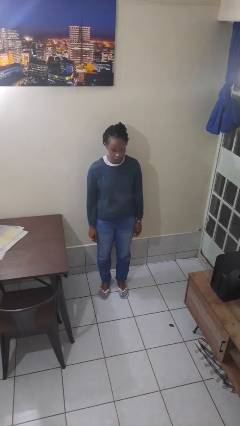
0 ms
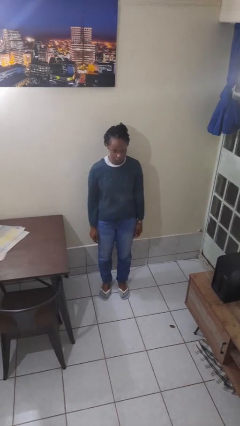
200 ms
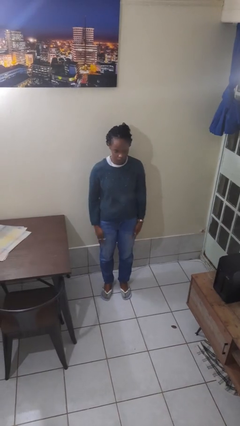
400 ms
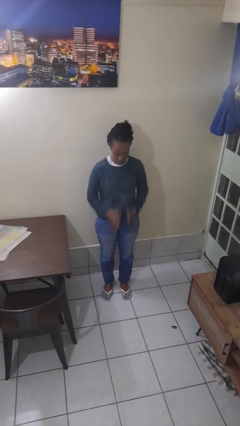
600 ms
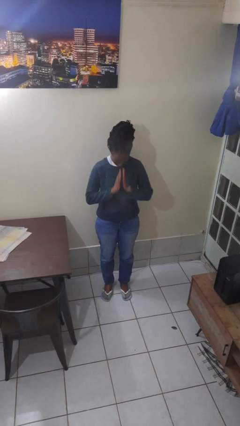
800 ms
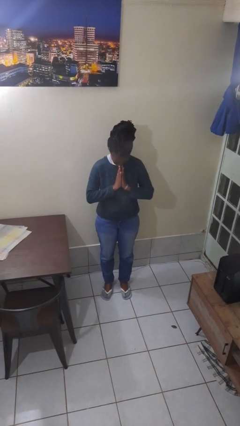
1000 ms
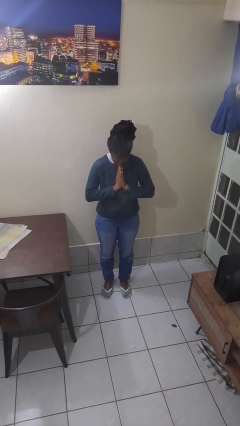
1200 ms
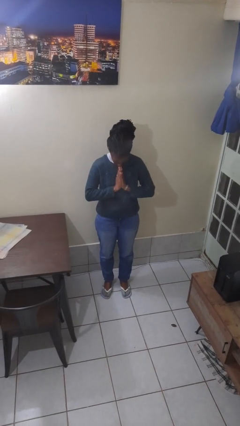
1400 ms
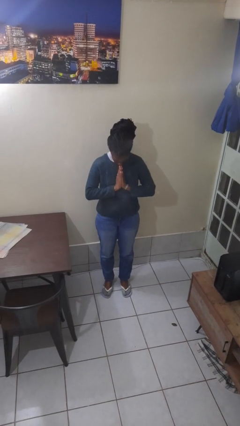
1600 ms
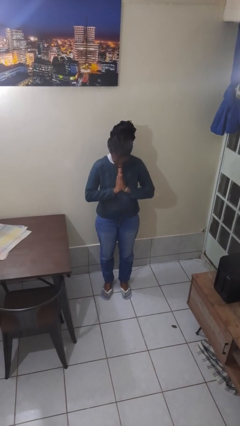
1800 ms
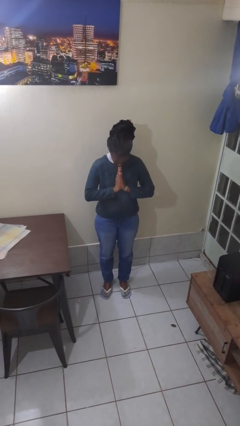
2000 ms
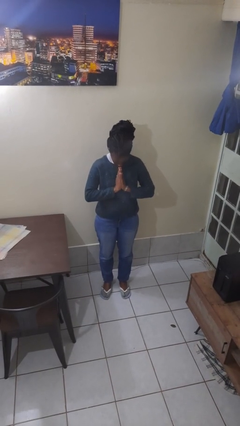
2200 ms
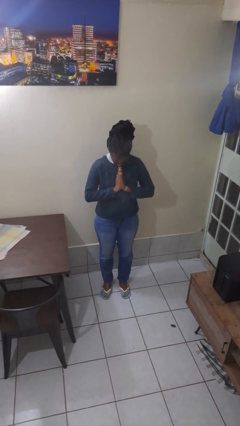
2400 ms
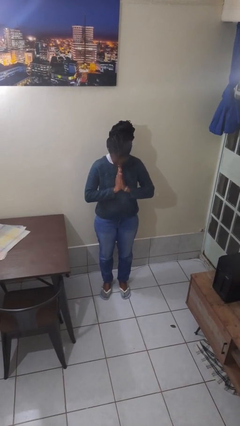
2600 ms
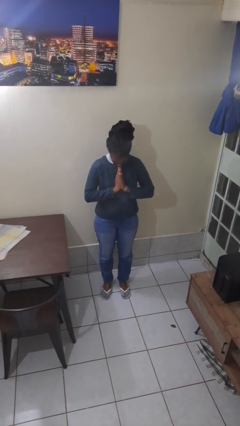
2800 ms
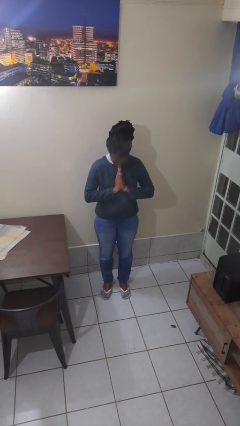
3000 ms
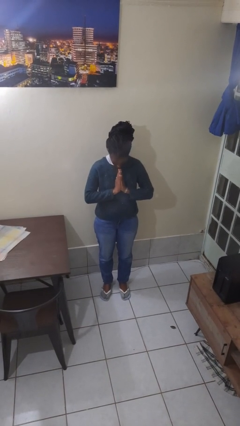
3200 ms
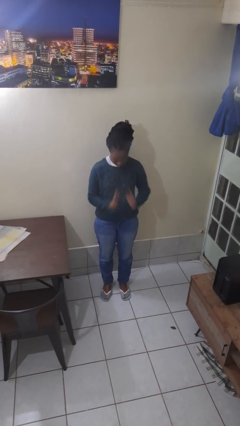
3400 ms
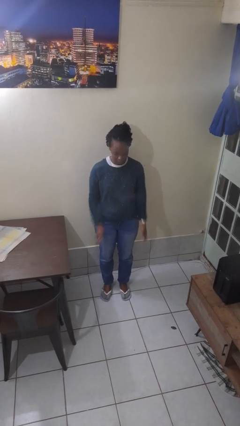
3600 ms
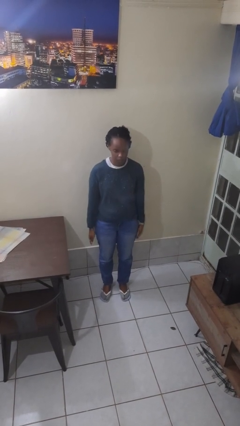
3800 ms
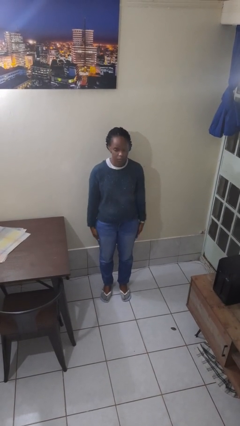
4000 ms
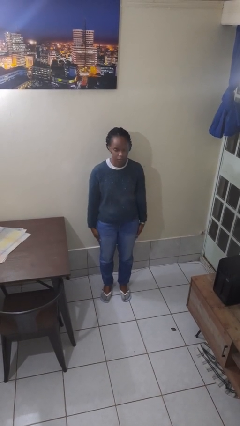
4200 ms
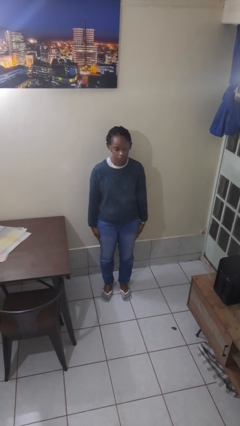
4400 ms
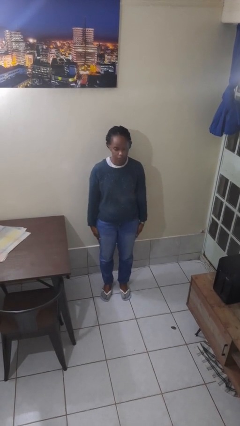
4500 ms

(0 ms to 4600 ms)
person prays

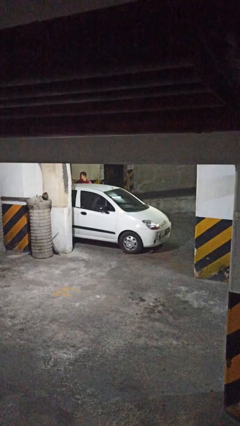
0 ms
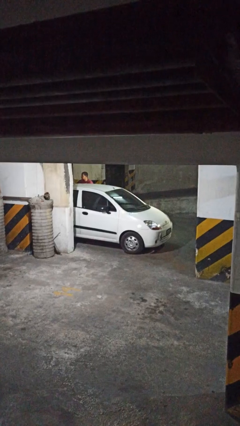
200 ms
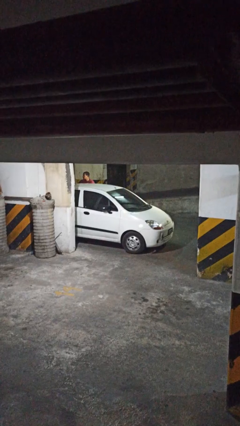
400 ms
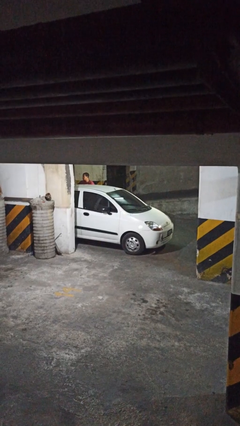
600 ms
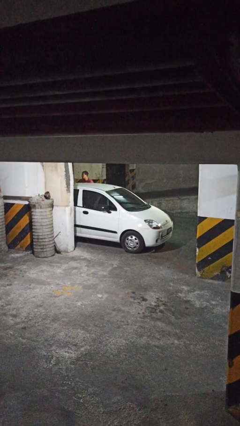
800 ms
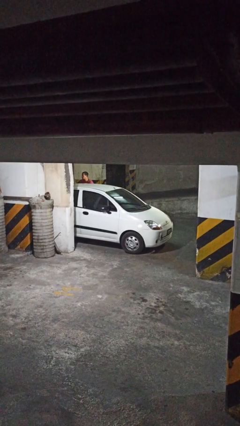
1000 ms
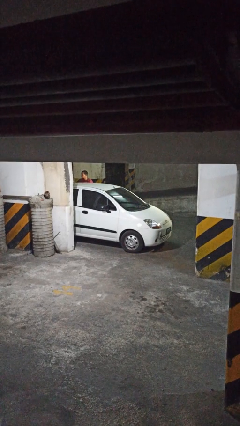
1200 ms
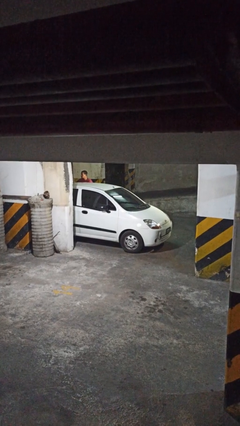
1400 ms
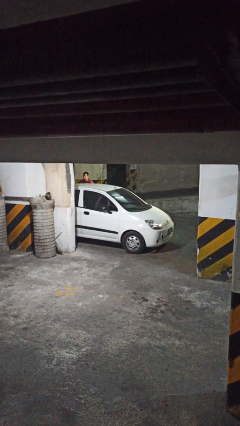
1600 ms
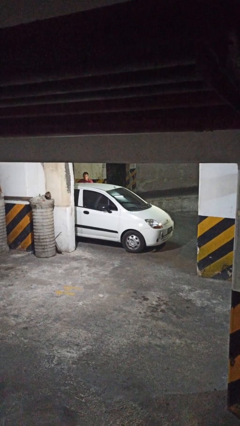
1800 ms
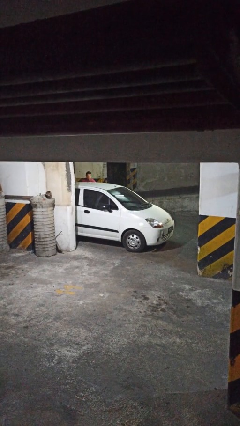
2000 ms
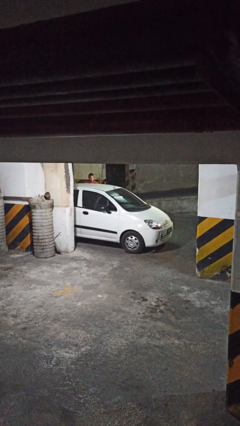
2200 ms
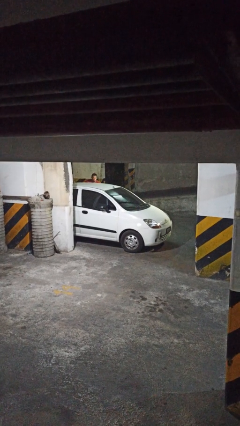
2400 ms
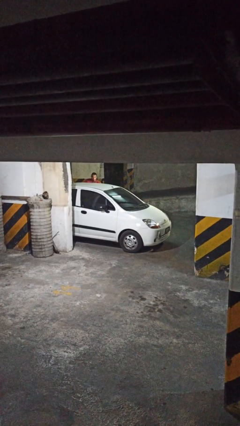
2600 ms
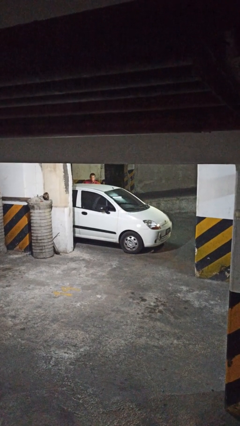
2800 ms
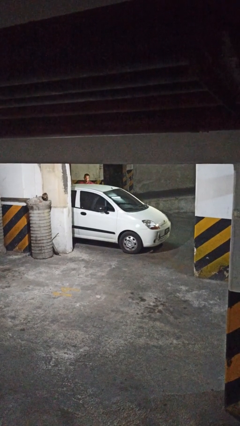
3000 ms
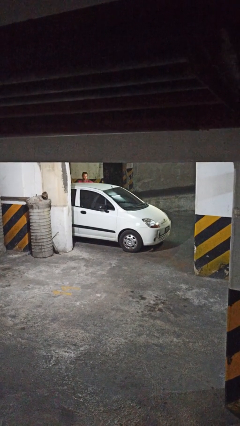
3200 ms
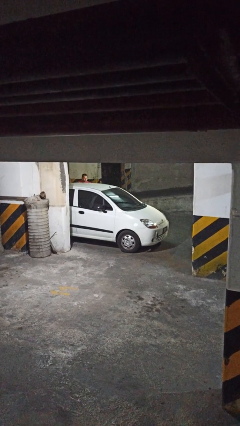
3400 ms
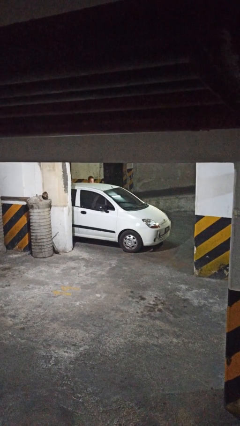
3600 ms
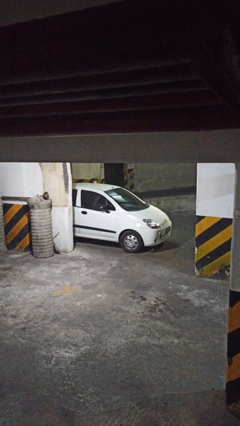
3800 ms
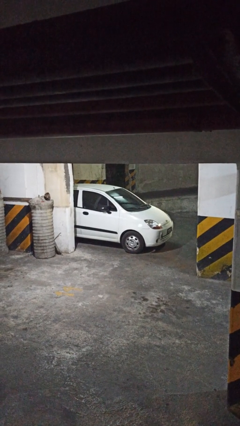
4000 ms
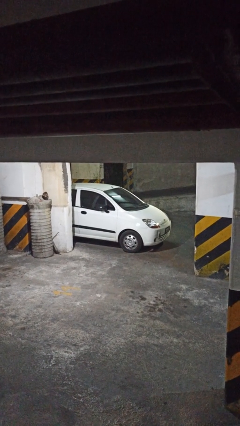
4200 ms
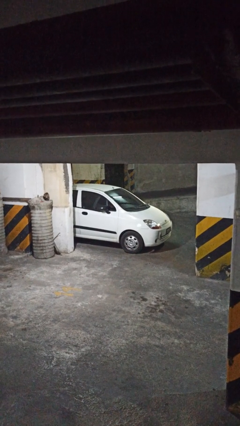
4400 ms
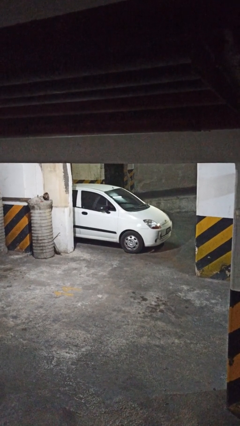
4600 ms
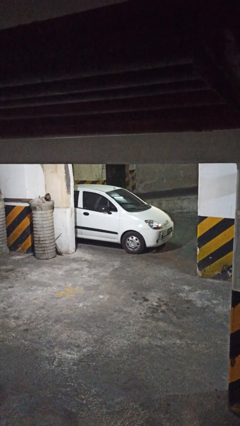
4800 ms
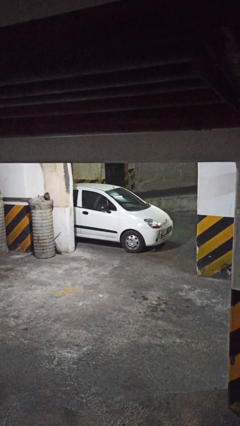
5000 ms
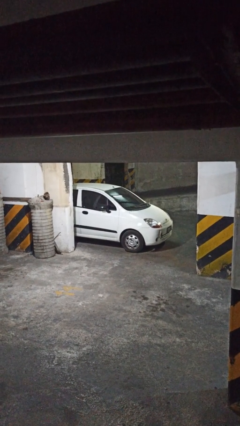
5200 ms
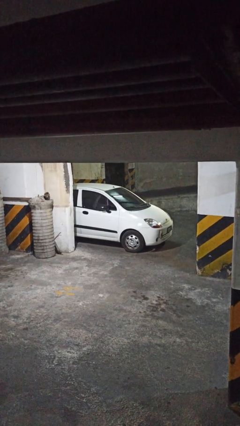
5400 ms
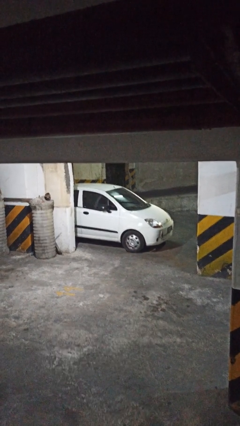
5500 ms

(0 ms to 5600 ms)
car picks up person

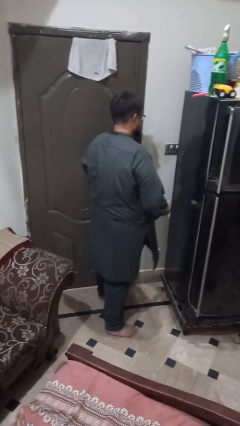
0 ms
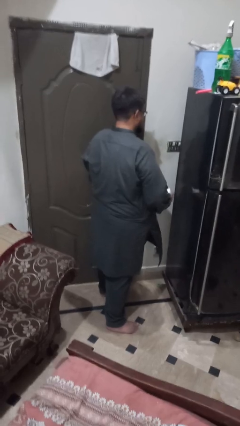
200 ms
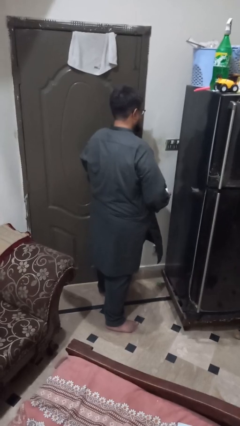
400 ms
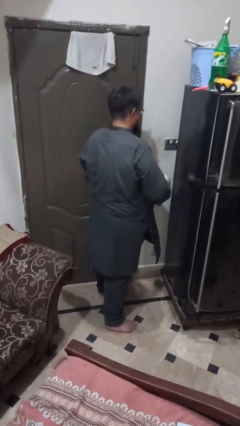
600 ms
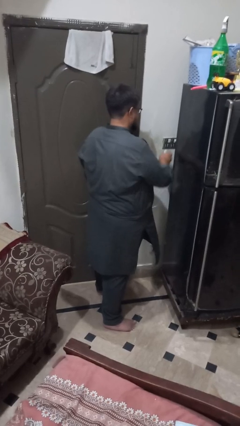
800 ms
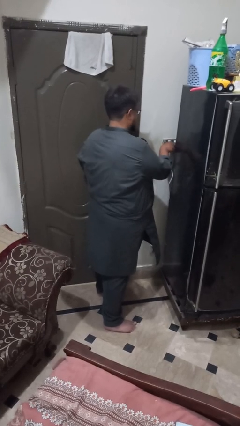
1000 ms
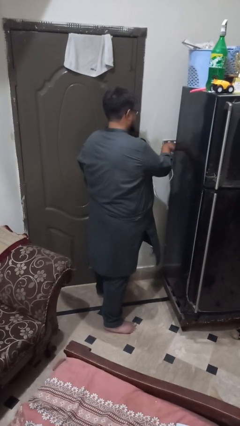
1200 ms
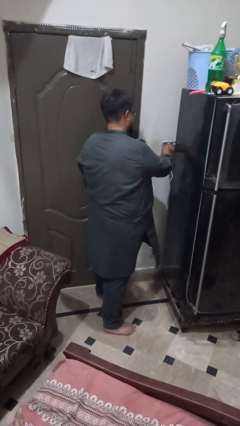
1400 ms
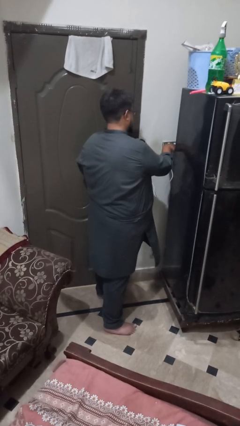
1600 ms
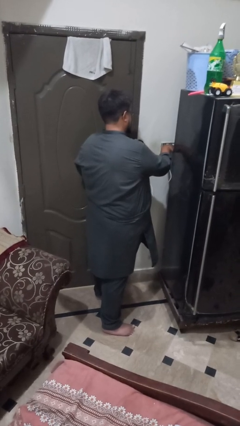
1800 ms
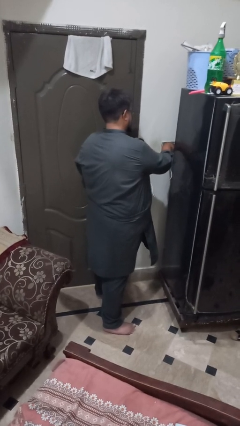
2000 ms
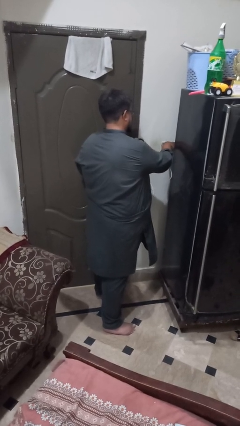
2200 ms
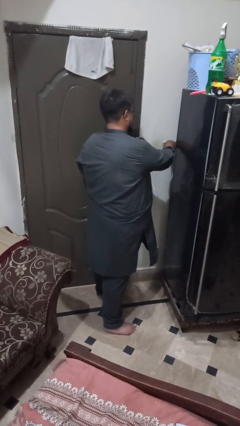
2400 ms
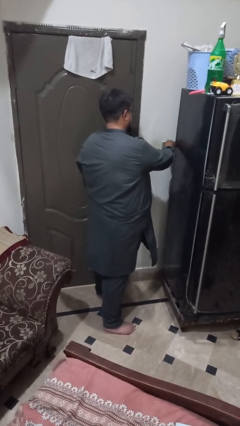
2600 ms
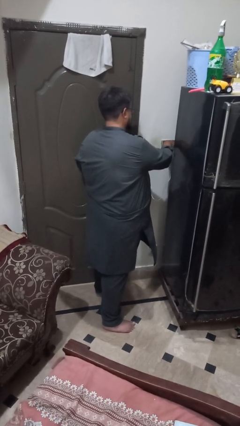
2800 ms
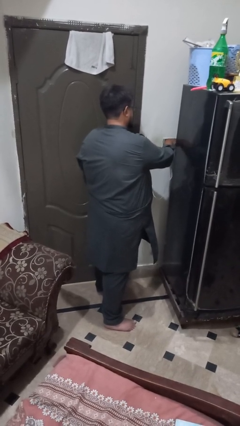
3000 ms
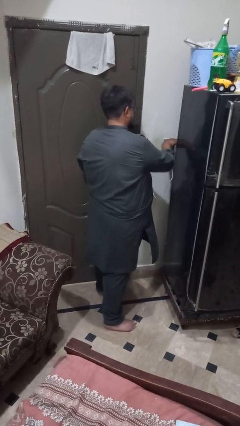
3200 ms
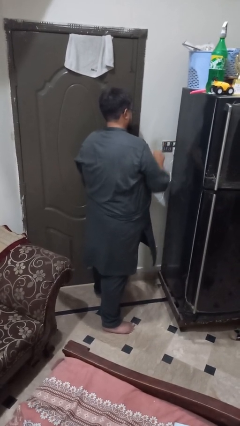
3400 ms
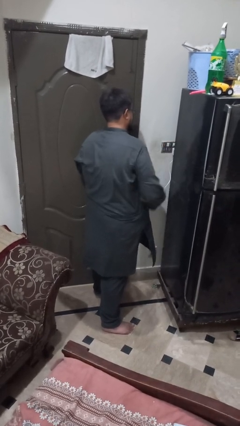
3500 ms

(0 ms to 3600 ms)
person plugs into electrical socket

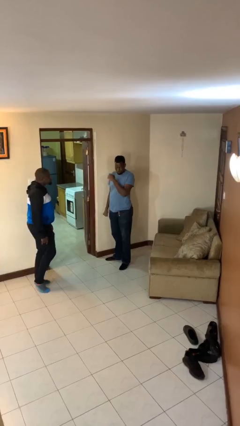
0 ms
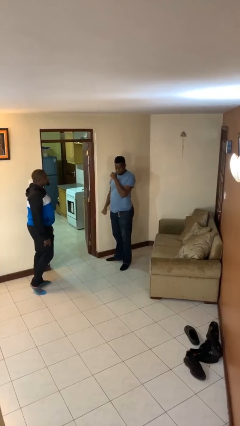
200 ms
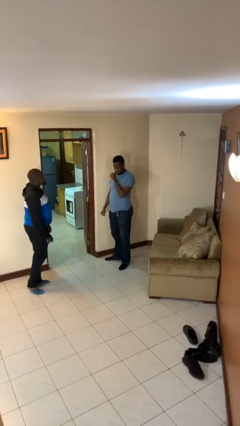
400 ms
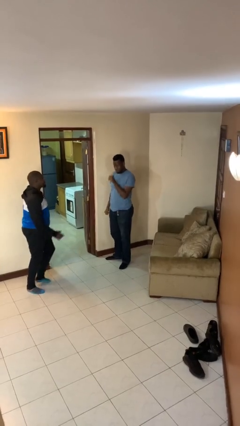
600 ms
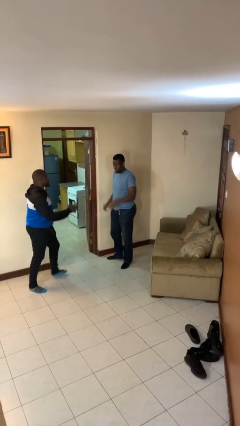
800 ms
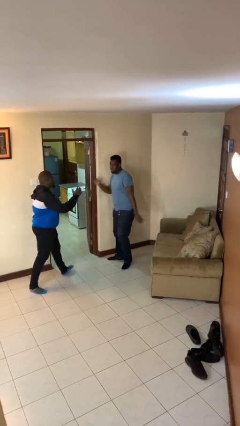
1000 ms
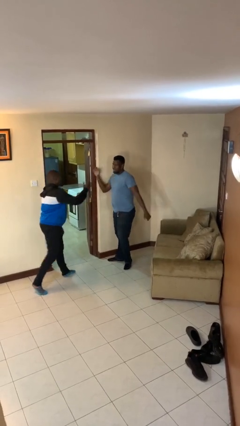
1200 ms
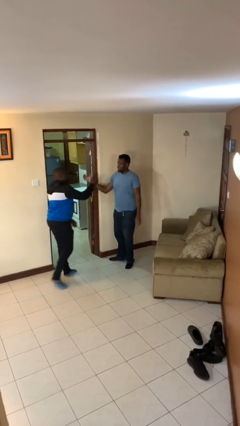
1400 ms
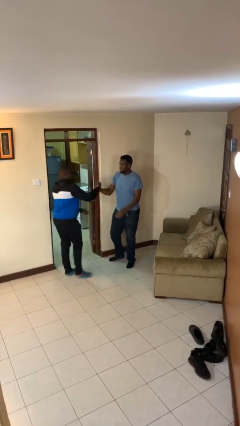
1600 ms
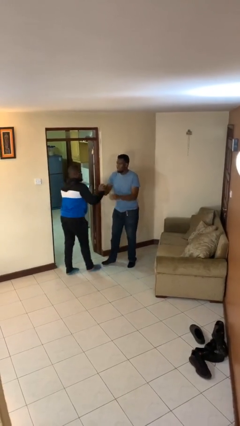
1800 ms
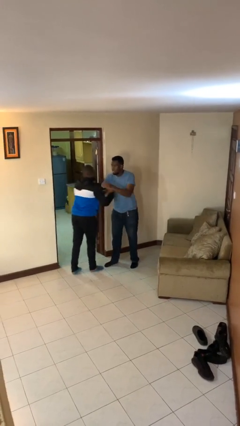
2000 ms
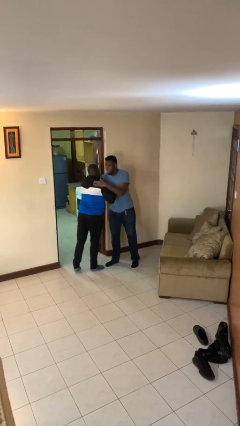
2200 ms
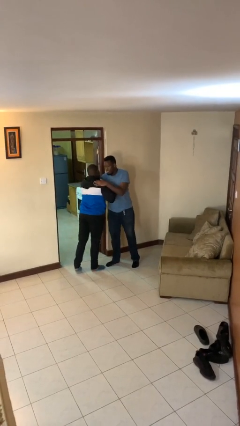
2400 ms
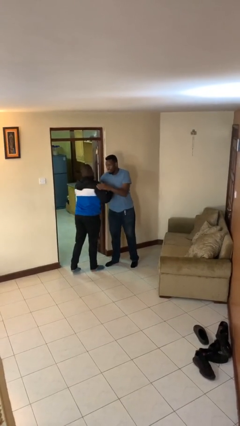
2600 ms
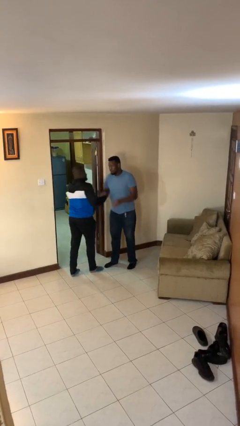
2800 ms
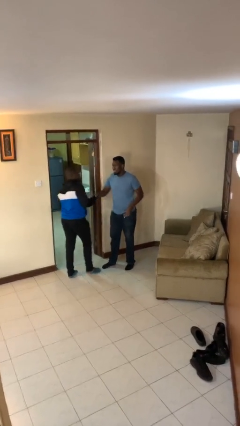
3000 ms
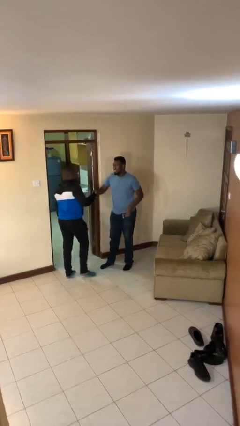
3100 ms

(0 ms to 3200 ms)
person embraces person

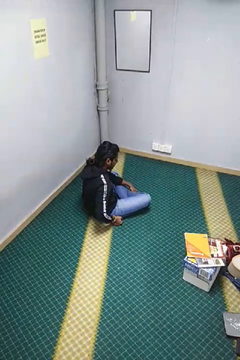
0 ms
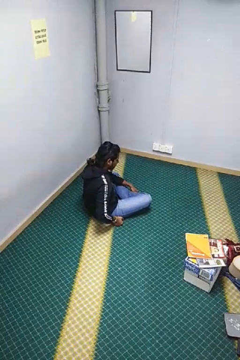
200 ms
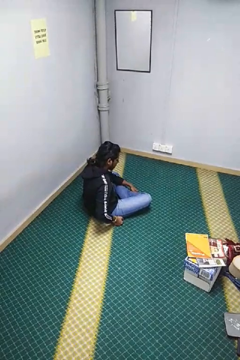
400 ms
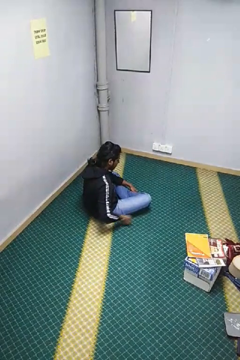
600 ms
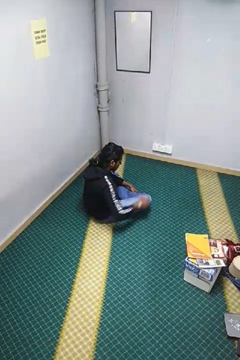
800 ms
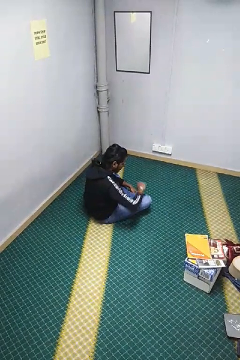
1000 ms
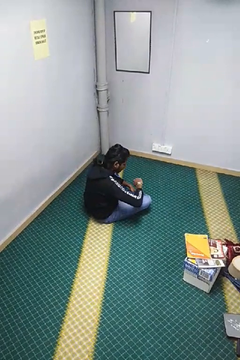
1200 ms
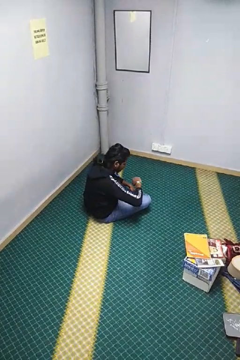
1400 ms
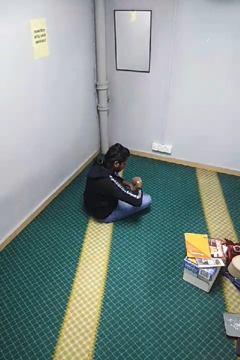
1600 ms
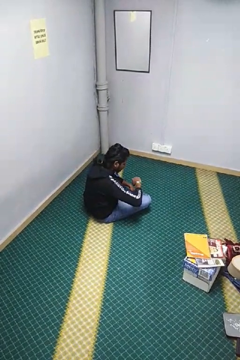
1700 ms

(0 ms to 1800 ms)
person looks at wristwatch
